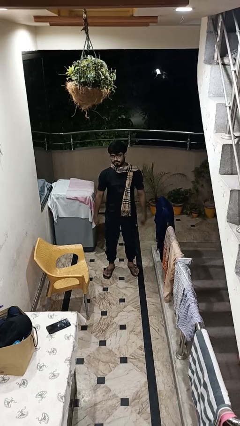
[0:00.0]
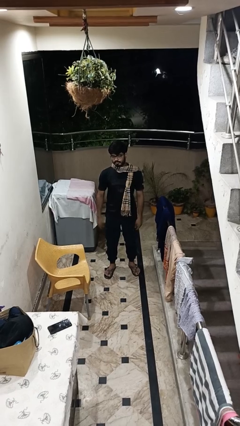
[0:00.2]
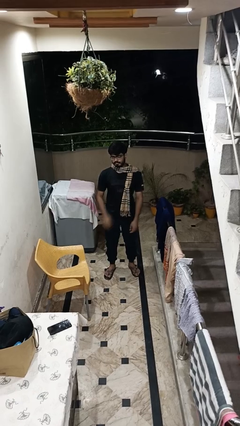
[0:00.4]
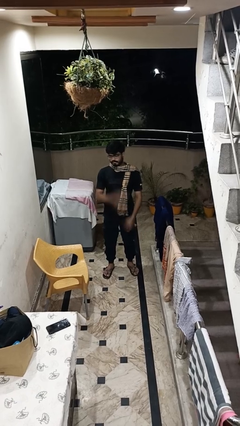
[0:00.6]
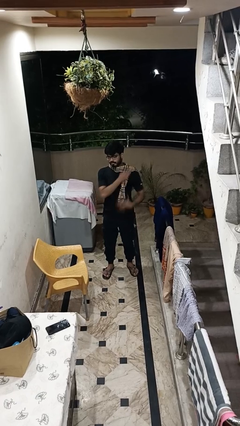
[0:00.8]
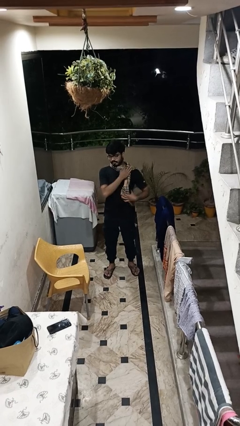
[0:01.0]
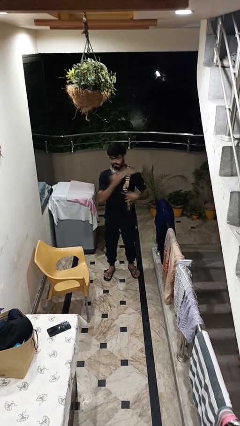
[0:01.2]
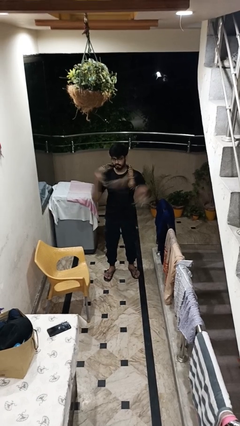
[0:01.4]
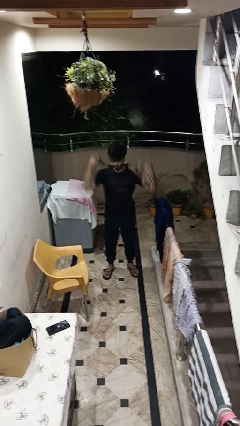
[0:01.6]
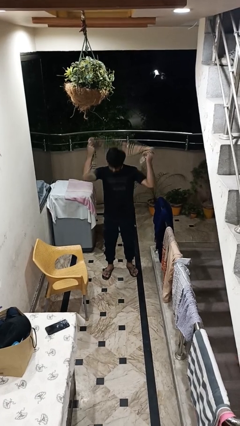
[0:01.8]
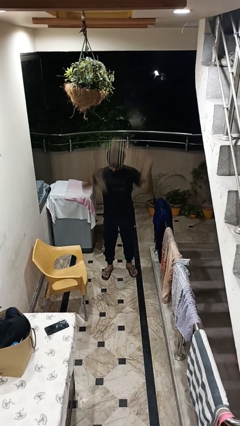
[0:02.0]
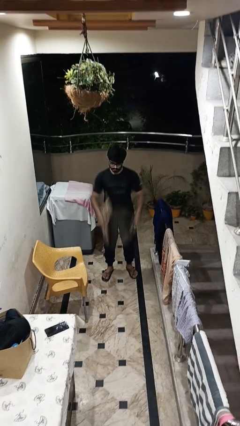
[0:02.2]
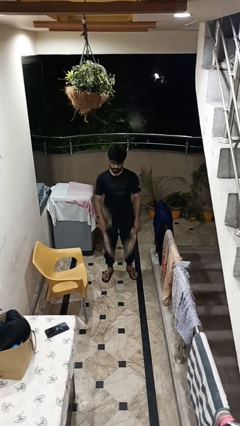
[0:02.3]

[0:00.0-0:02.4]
person takes off scarf

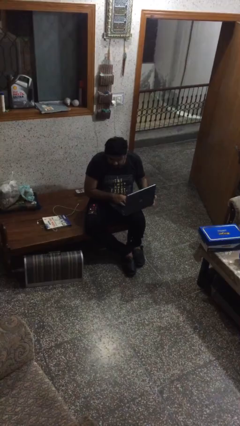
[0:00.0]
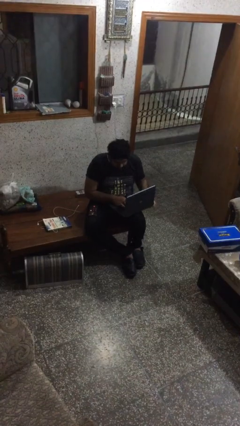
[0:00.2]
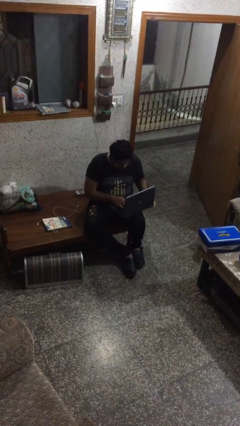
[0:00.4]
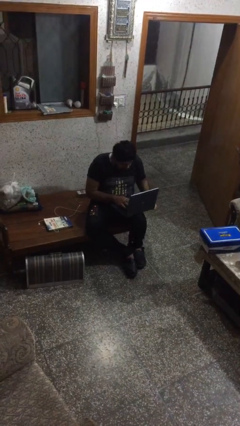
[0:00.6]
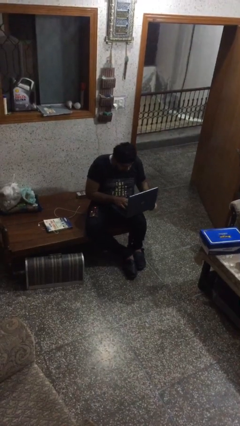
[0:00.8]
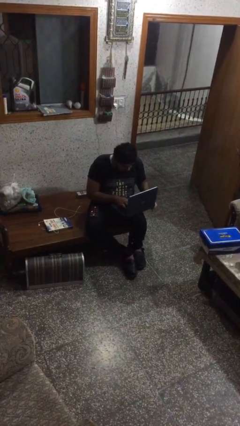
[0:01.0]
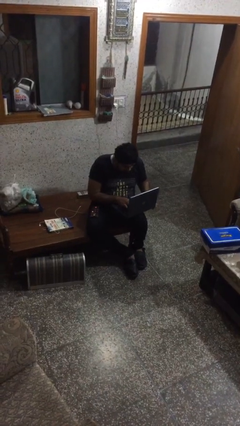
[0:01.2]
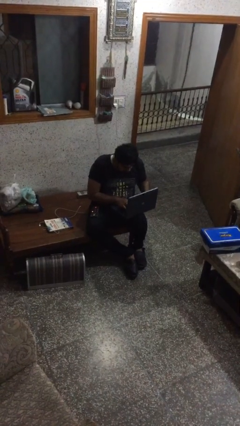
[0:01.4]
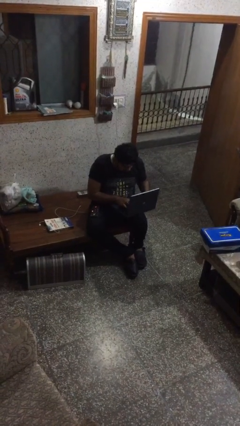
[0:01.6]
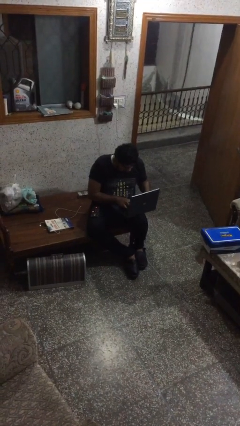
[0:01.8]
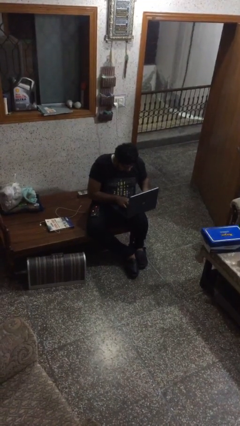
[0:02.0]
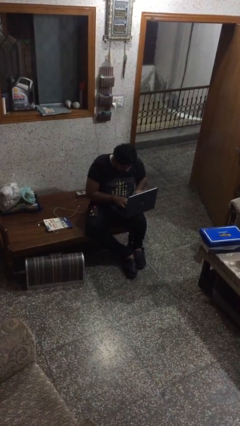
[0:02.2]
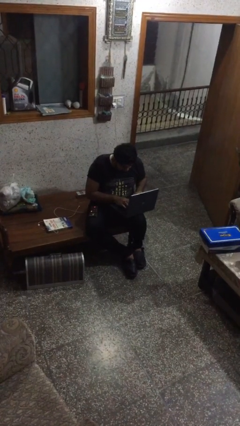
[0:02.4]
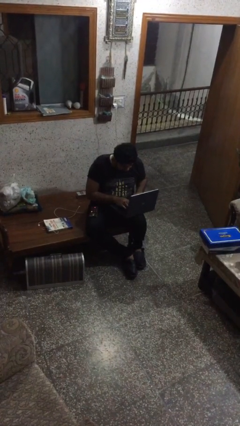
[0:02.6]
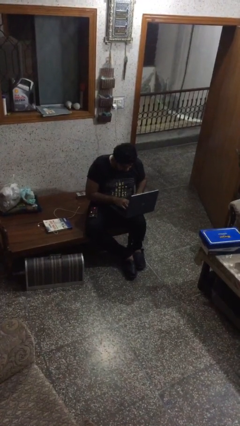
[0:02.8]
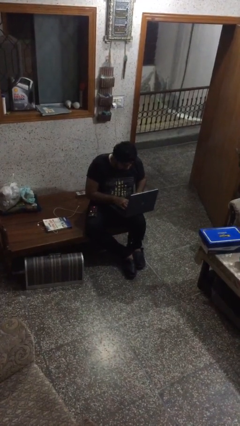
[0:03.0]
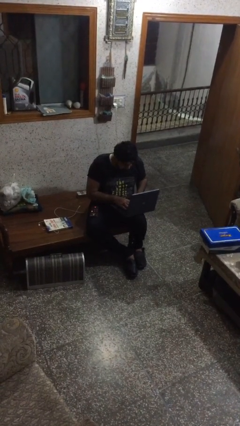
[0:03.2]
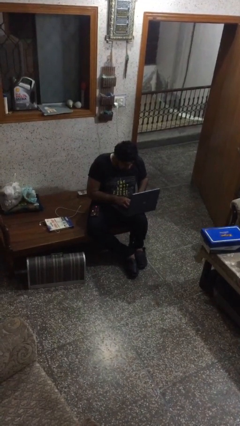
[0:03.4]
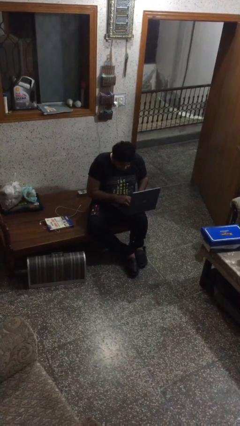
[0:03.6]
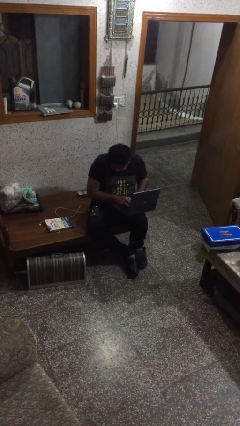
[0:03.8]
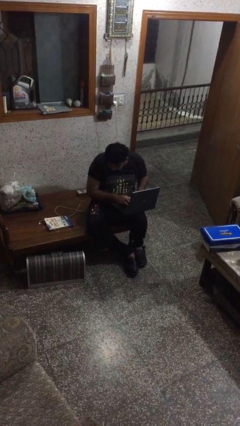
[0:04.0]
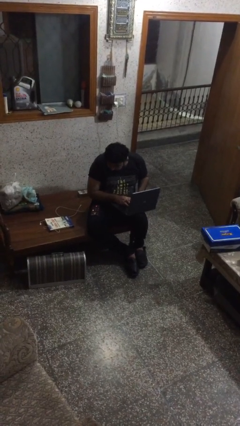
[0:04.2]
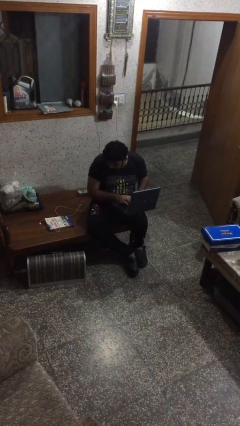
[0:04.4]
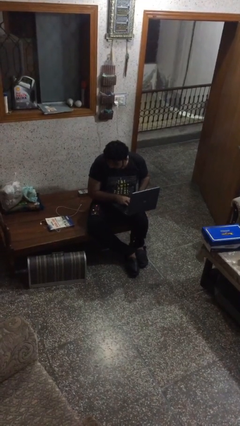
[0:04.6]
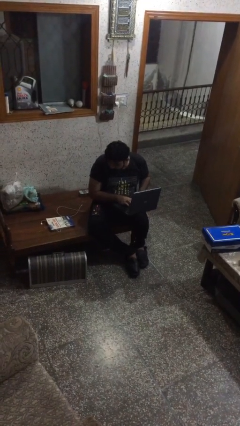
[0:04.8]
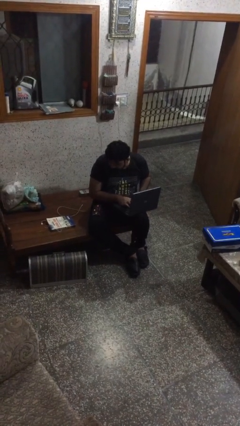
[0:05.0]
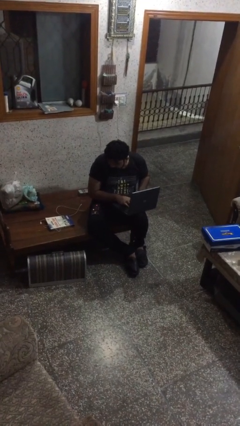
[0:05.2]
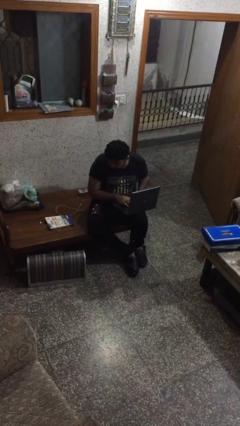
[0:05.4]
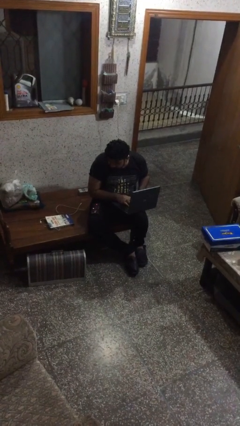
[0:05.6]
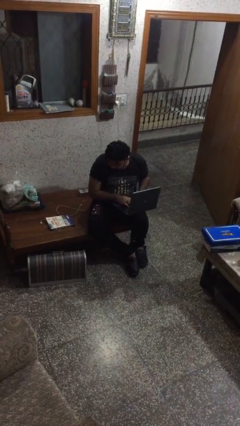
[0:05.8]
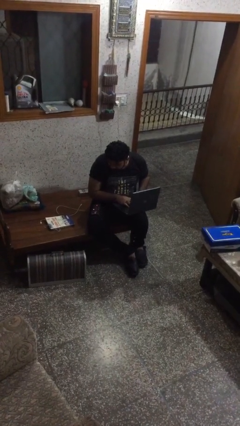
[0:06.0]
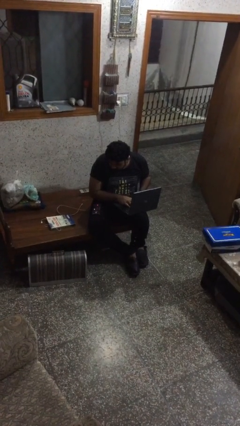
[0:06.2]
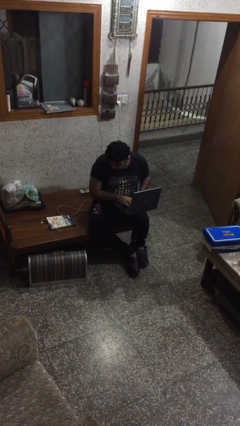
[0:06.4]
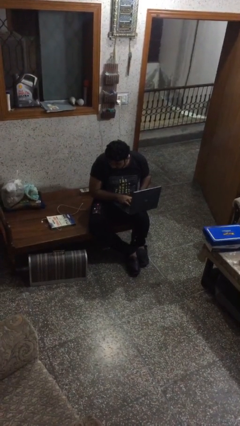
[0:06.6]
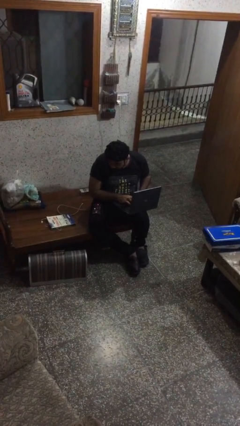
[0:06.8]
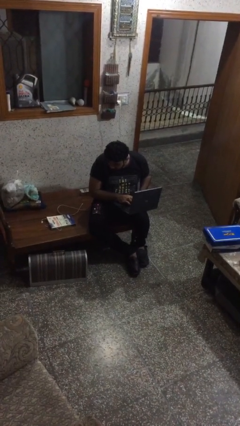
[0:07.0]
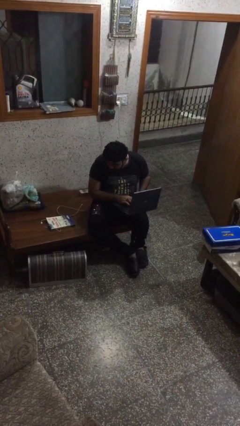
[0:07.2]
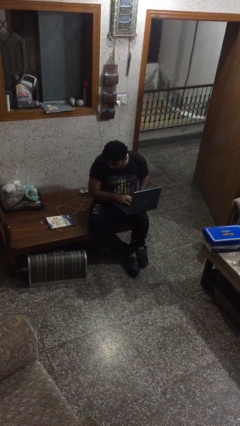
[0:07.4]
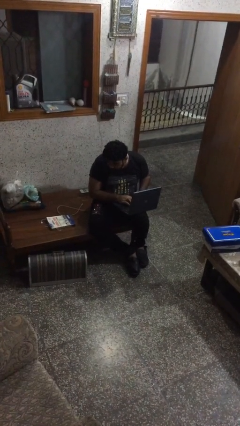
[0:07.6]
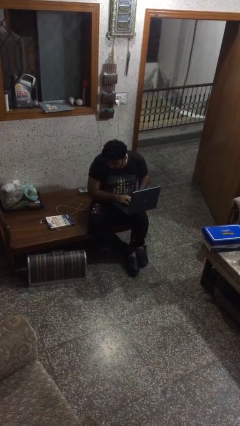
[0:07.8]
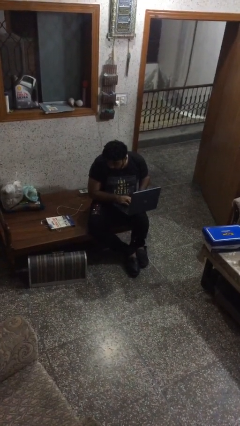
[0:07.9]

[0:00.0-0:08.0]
person interacts with laptop

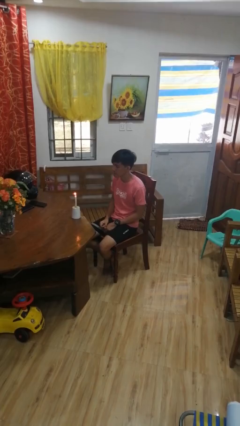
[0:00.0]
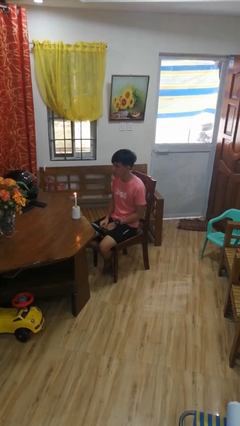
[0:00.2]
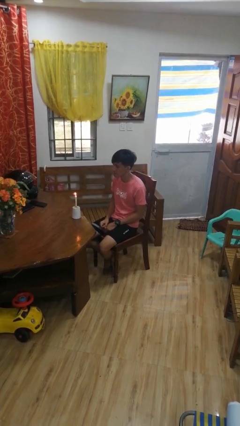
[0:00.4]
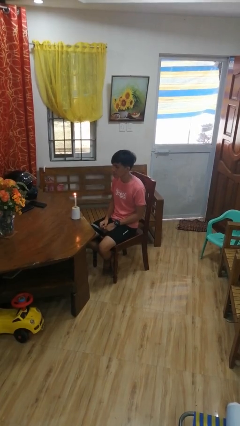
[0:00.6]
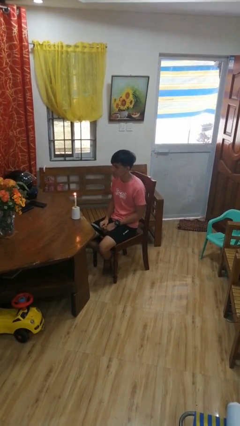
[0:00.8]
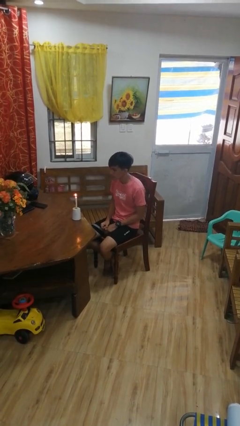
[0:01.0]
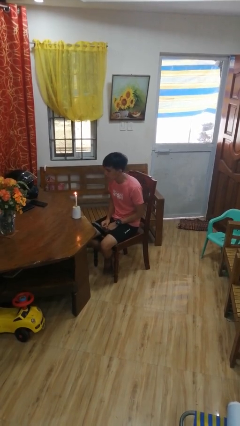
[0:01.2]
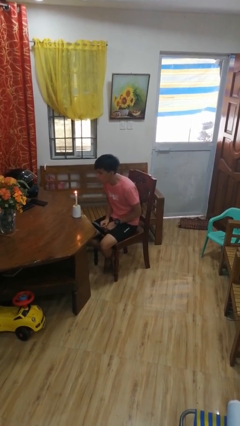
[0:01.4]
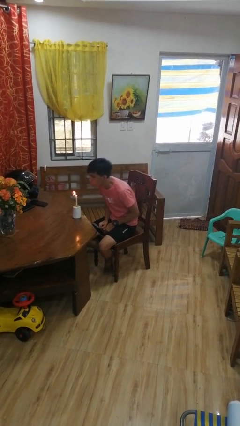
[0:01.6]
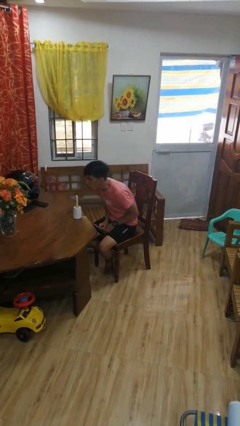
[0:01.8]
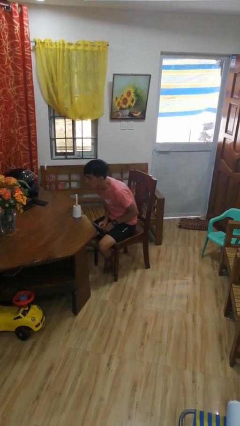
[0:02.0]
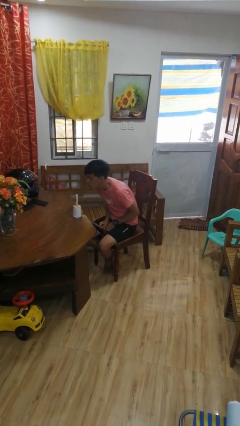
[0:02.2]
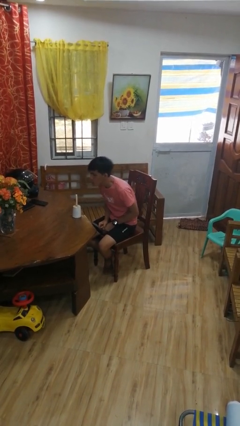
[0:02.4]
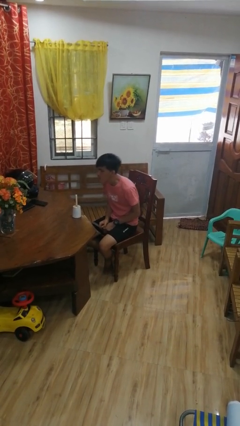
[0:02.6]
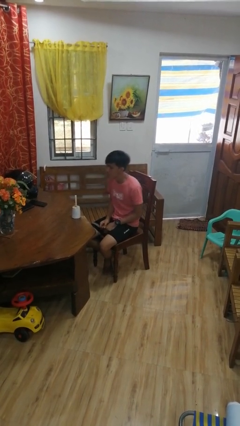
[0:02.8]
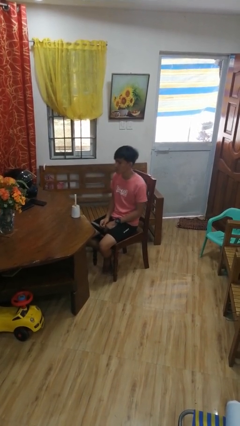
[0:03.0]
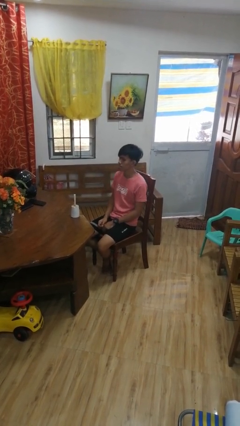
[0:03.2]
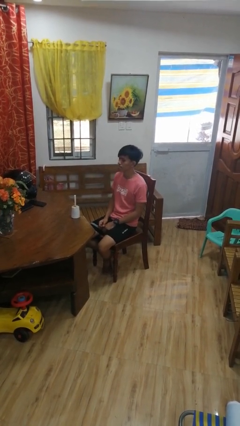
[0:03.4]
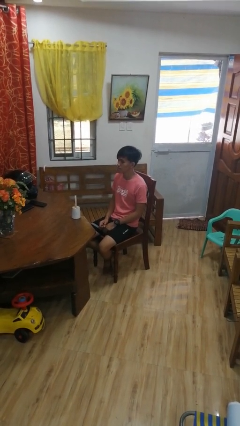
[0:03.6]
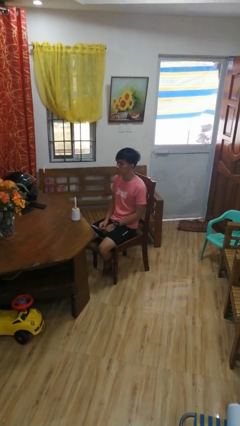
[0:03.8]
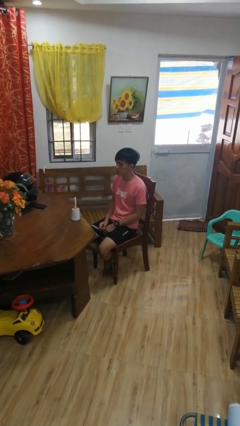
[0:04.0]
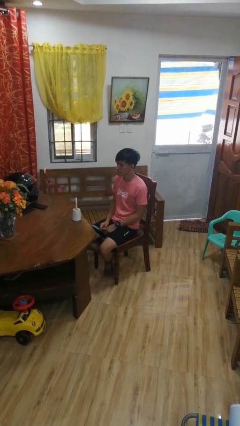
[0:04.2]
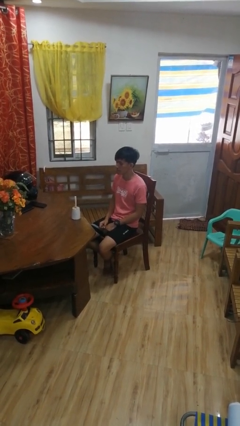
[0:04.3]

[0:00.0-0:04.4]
person extinguishes candle

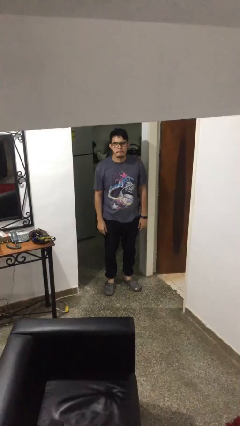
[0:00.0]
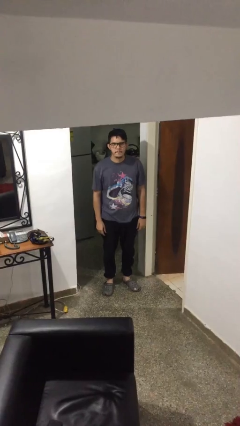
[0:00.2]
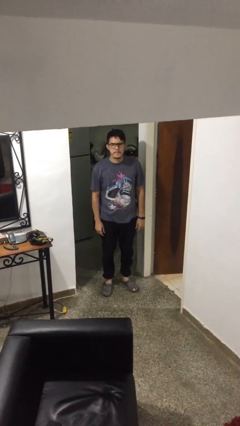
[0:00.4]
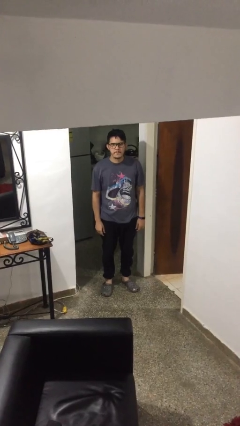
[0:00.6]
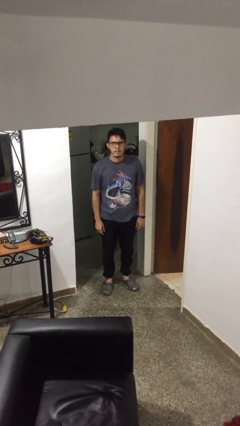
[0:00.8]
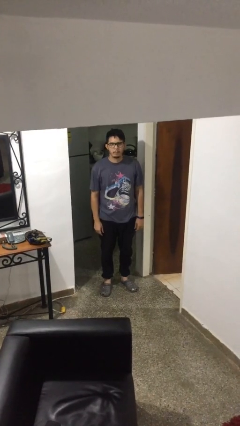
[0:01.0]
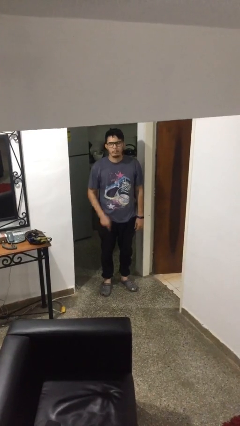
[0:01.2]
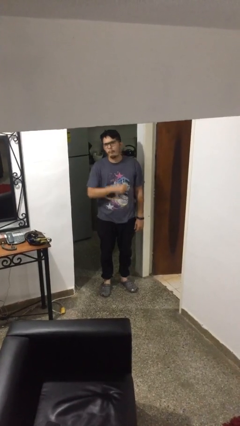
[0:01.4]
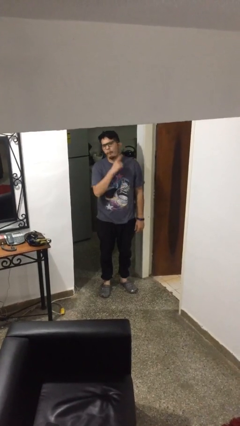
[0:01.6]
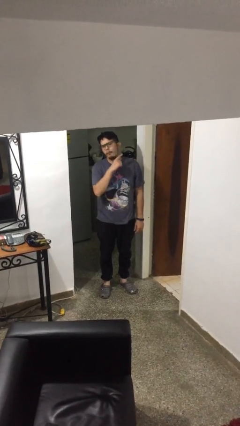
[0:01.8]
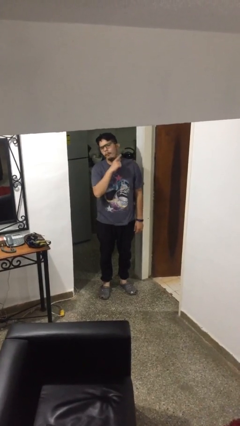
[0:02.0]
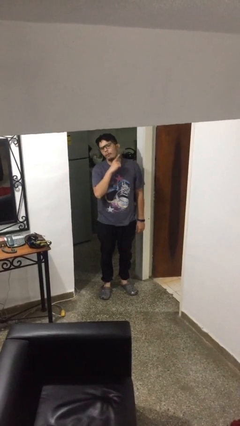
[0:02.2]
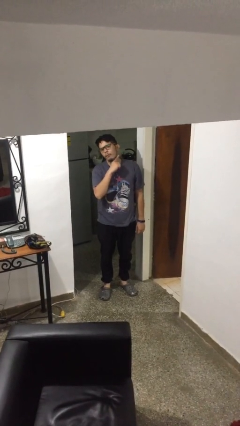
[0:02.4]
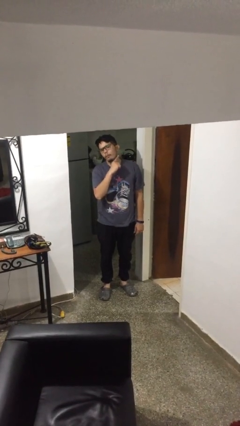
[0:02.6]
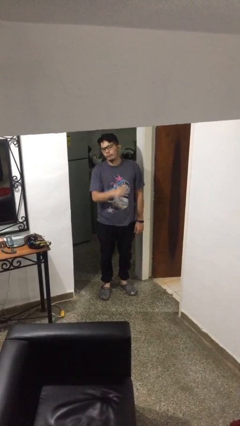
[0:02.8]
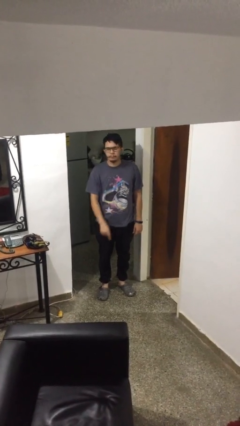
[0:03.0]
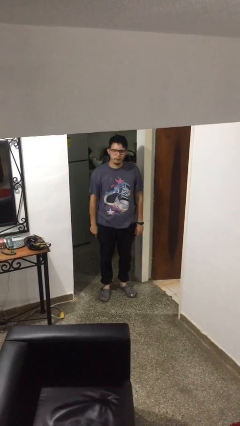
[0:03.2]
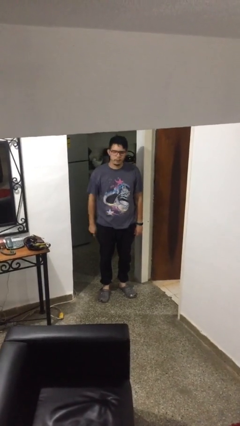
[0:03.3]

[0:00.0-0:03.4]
person gestures cut
